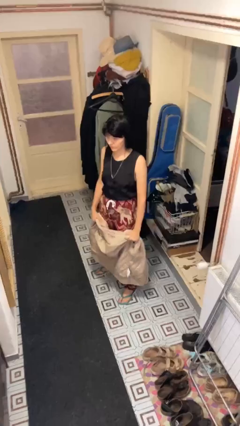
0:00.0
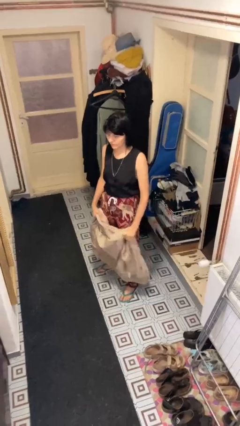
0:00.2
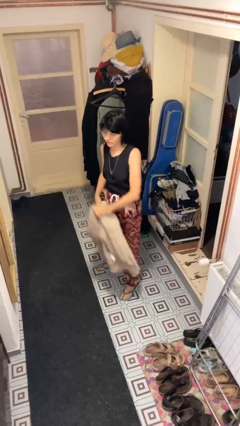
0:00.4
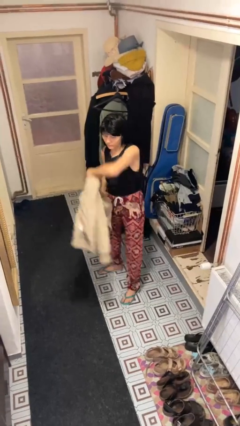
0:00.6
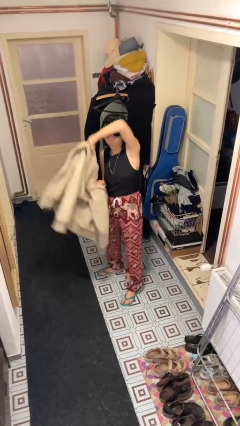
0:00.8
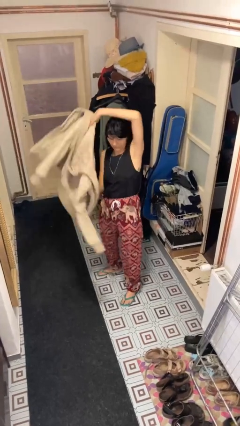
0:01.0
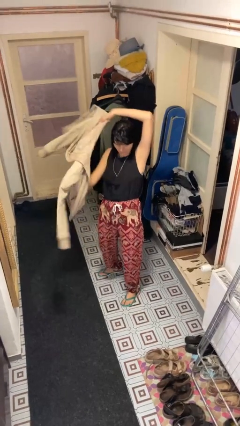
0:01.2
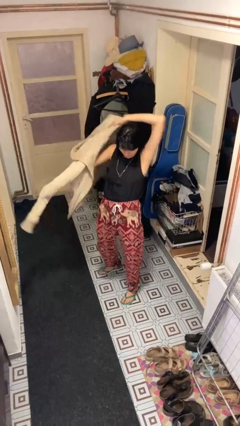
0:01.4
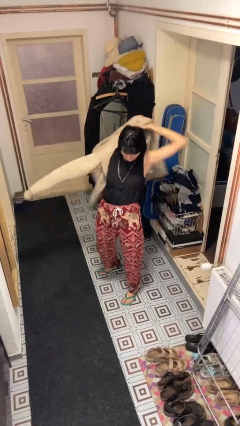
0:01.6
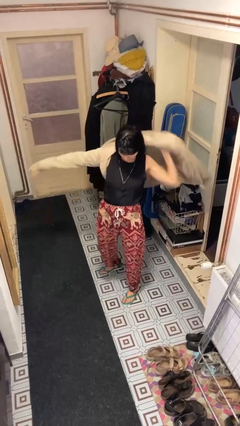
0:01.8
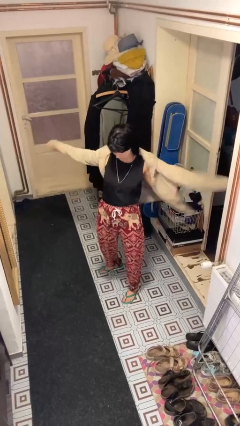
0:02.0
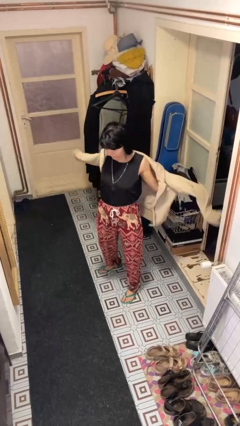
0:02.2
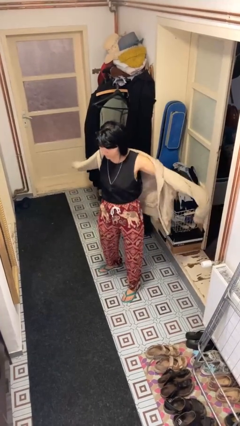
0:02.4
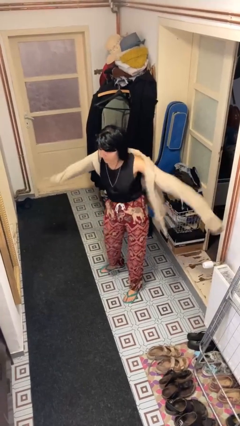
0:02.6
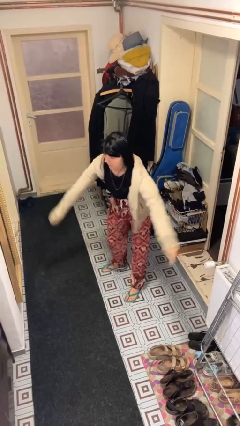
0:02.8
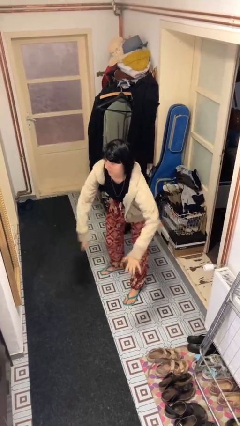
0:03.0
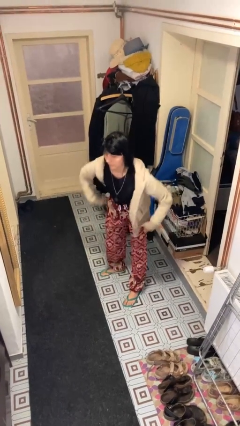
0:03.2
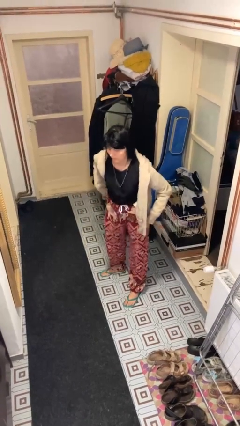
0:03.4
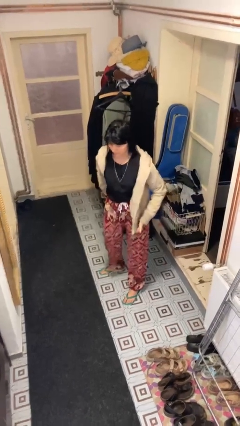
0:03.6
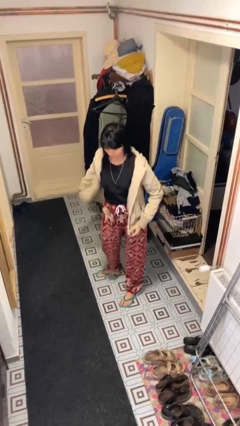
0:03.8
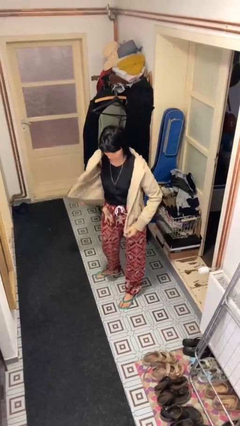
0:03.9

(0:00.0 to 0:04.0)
person puts on jacket

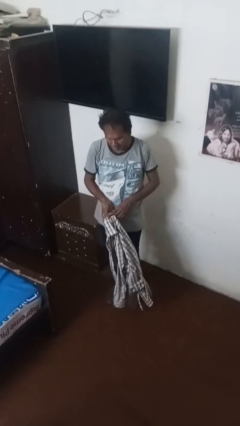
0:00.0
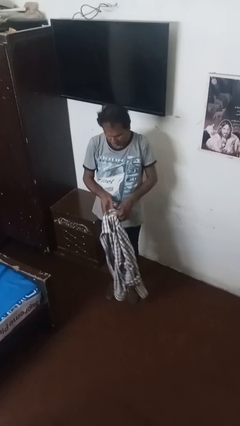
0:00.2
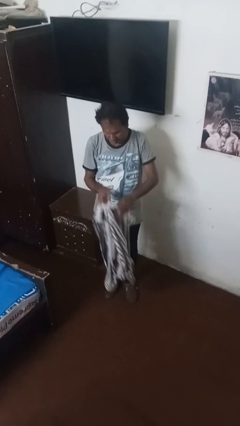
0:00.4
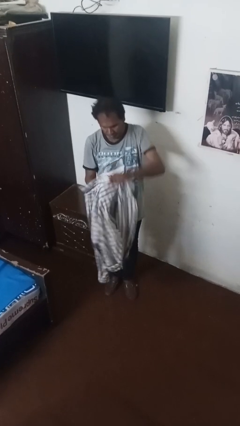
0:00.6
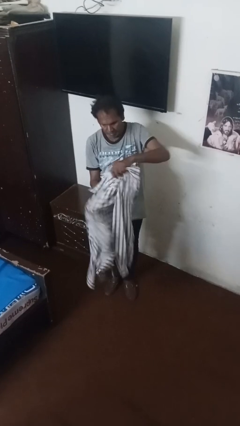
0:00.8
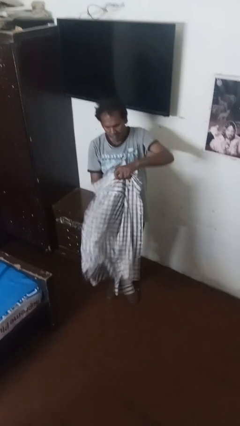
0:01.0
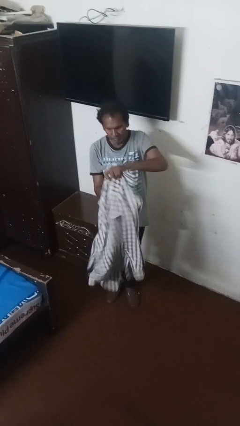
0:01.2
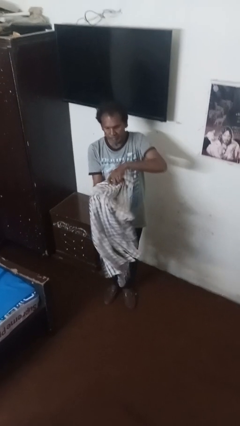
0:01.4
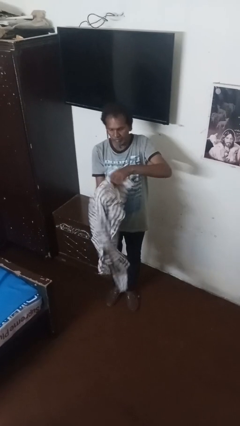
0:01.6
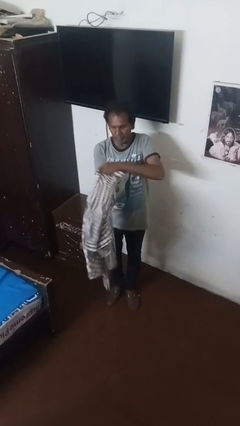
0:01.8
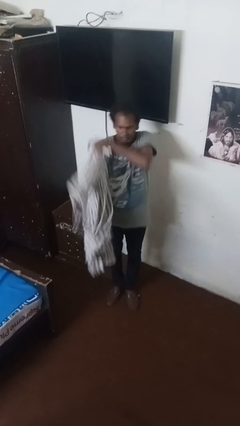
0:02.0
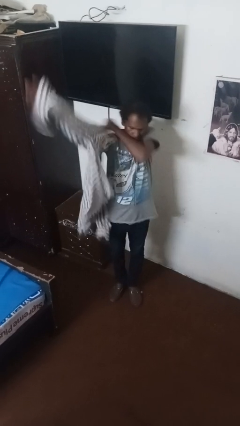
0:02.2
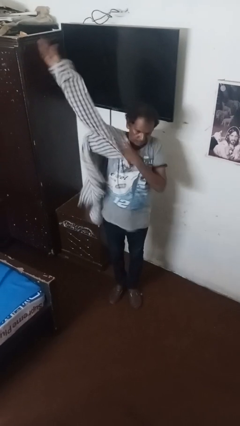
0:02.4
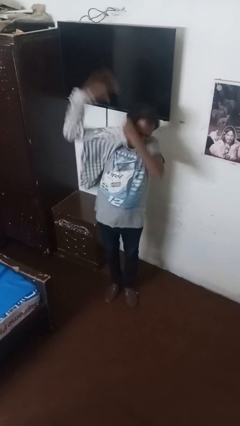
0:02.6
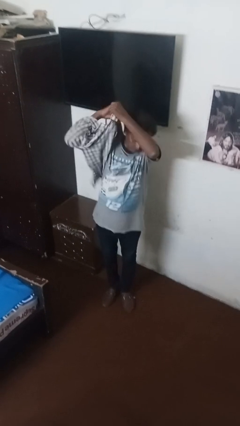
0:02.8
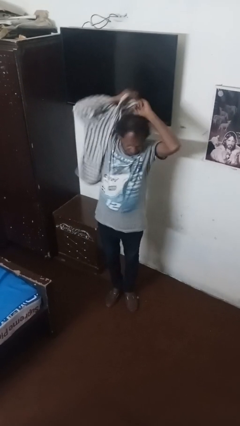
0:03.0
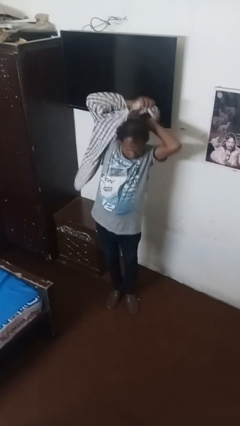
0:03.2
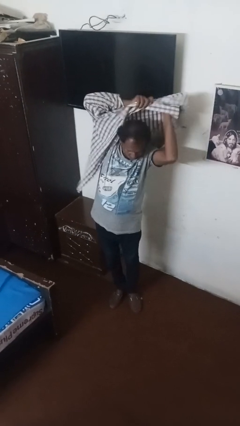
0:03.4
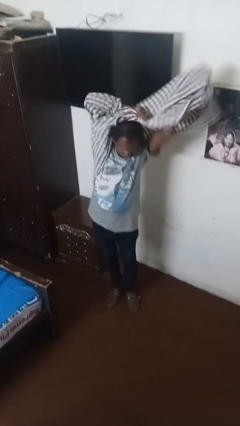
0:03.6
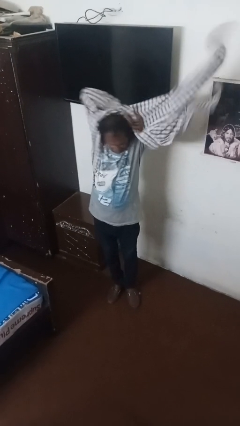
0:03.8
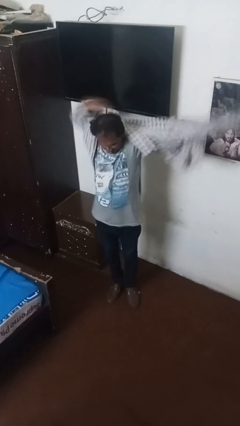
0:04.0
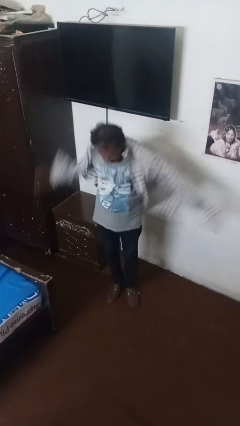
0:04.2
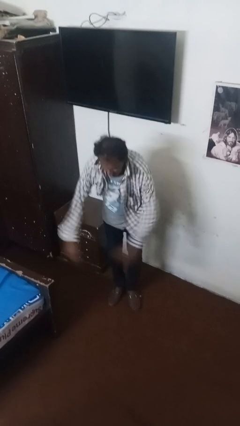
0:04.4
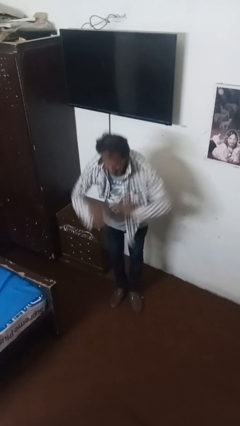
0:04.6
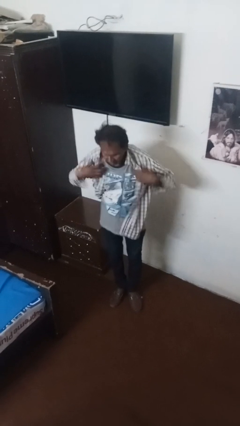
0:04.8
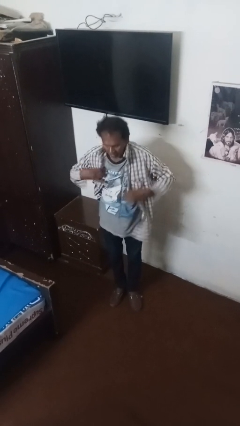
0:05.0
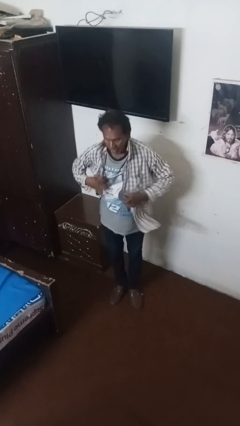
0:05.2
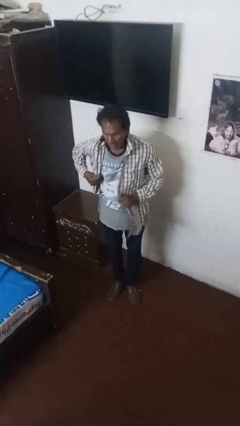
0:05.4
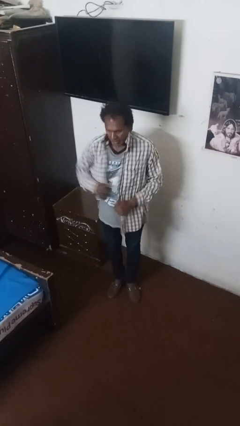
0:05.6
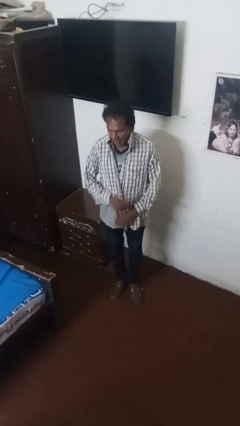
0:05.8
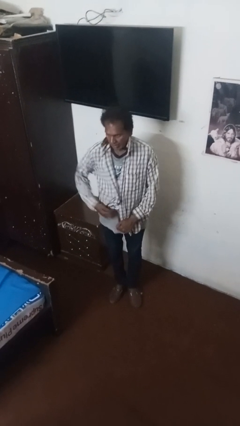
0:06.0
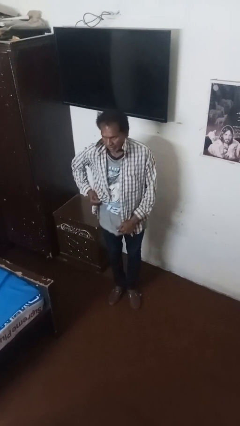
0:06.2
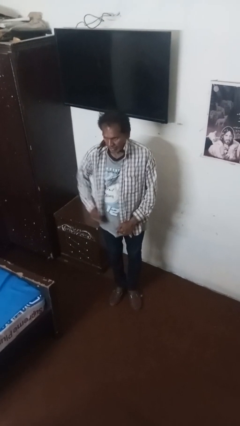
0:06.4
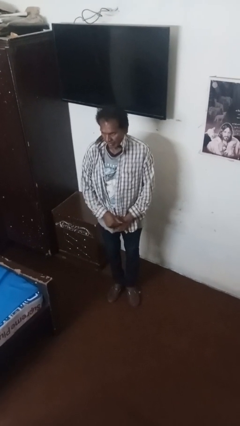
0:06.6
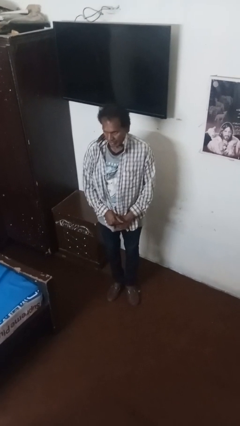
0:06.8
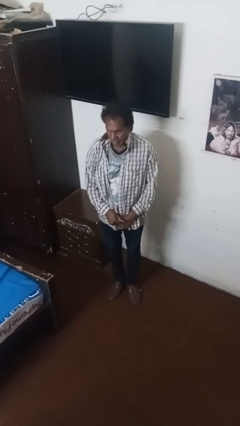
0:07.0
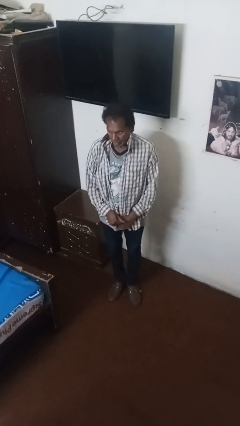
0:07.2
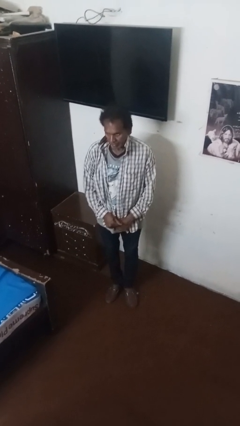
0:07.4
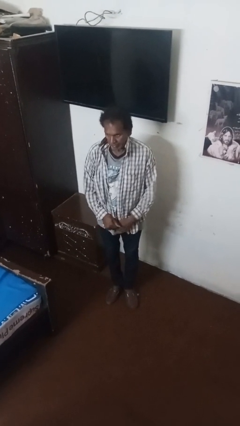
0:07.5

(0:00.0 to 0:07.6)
person puts on shirt

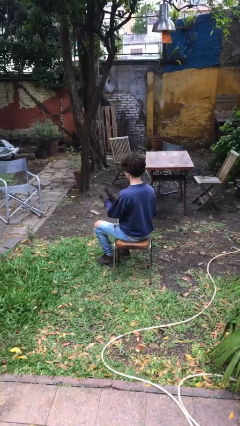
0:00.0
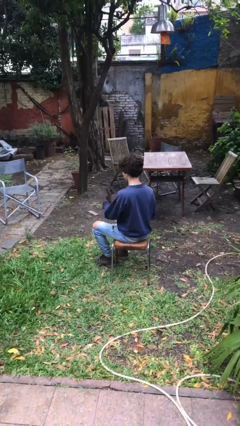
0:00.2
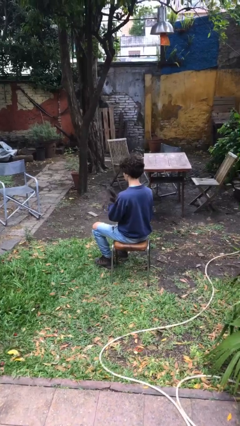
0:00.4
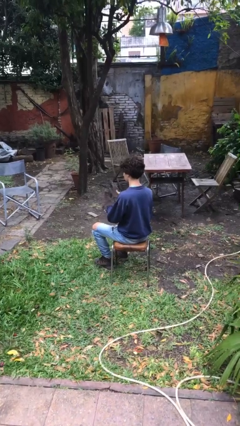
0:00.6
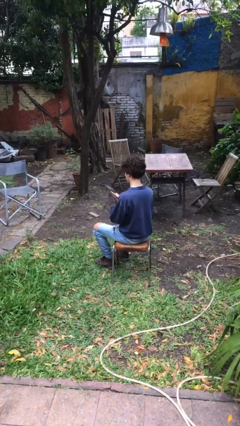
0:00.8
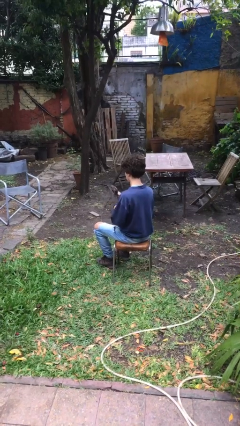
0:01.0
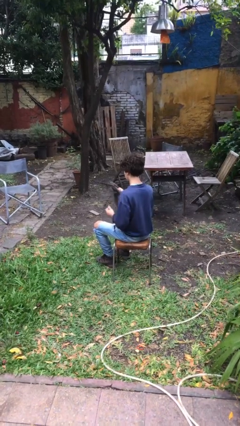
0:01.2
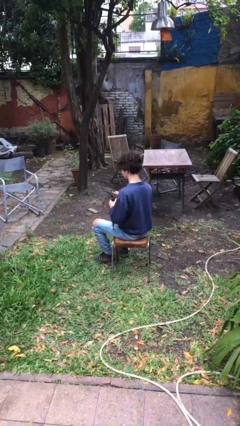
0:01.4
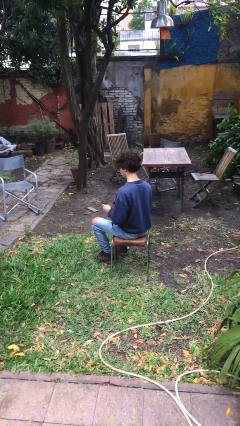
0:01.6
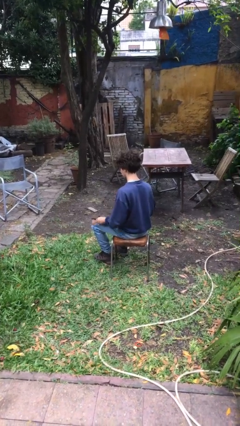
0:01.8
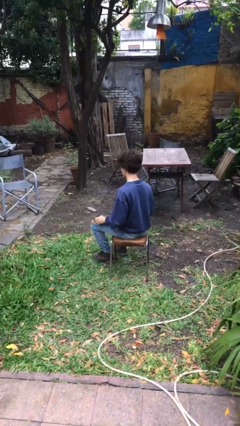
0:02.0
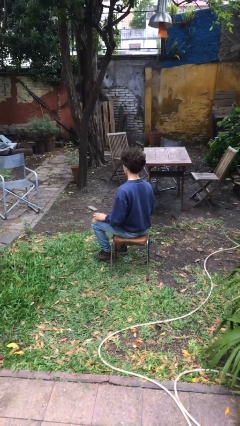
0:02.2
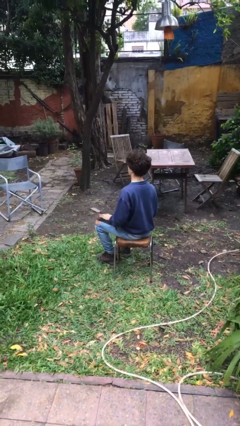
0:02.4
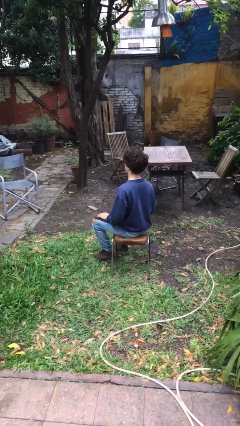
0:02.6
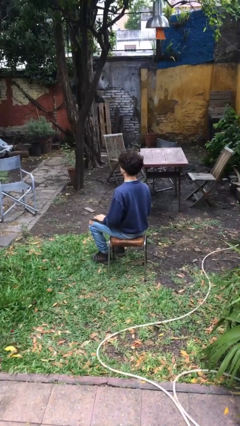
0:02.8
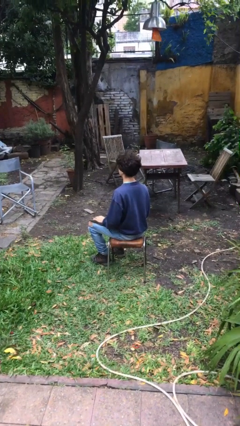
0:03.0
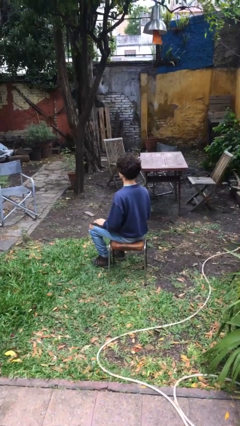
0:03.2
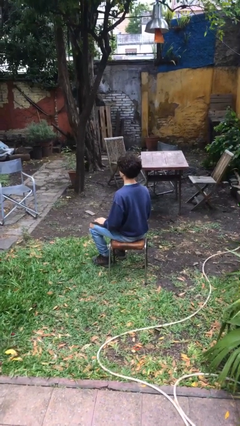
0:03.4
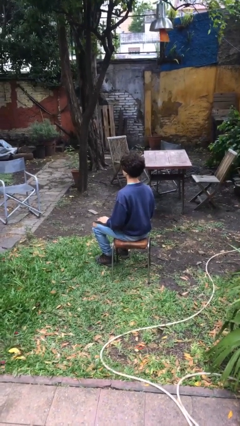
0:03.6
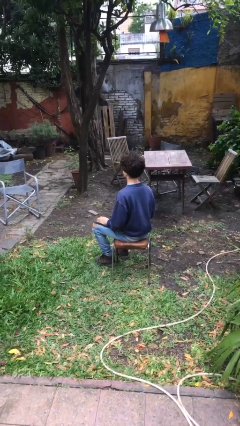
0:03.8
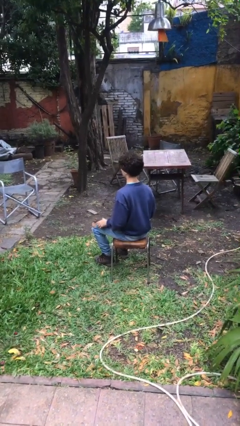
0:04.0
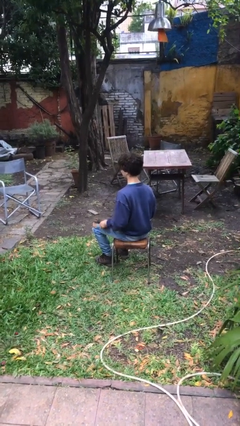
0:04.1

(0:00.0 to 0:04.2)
person takes off gloves

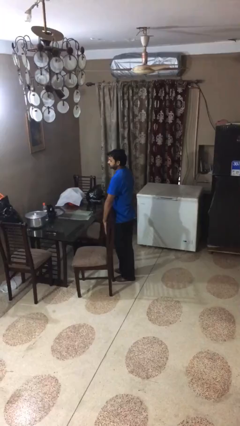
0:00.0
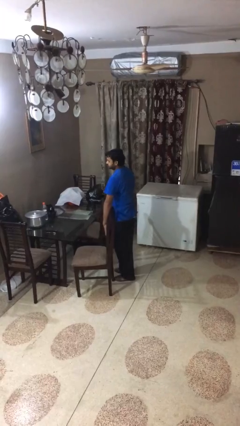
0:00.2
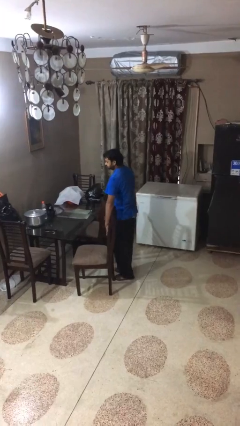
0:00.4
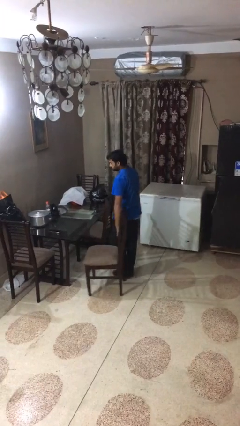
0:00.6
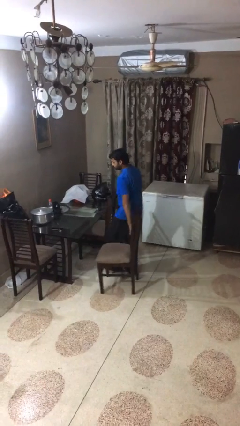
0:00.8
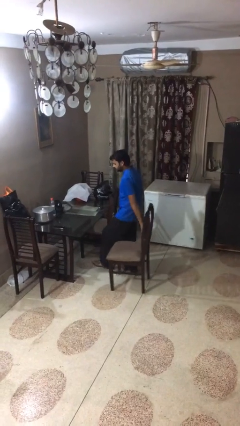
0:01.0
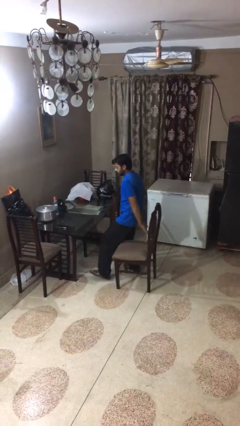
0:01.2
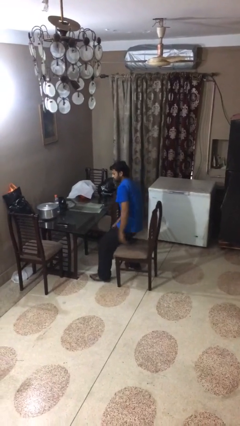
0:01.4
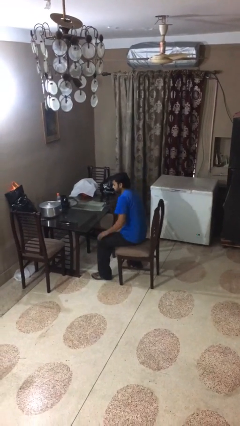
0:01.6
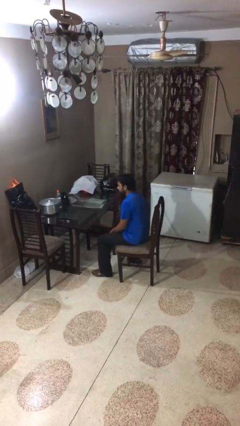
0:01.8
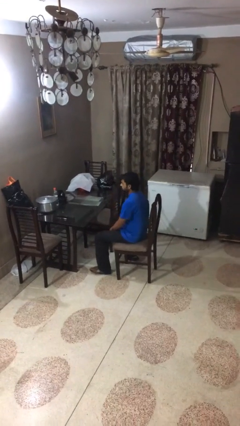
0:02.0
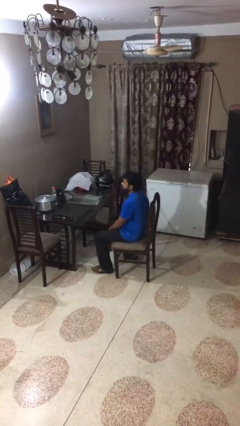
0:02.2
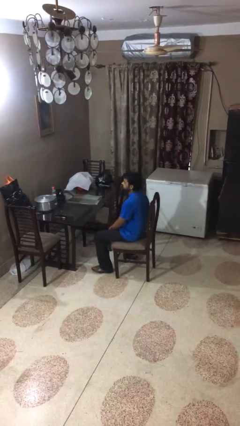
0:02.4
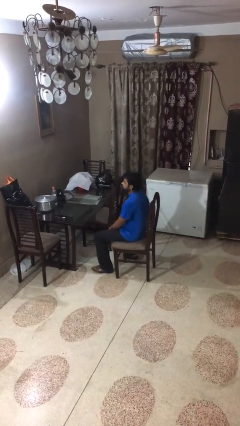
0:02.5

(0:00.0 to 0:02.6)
person sits down
